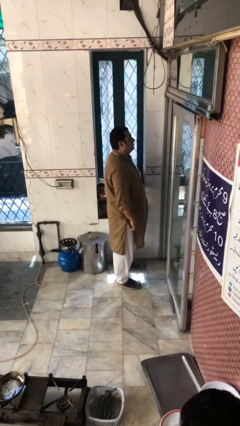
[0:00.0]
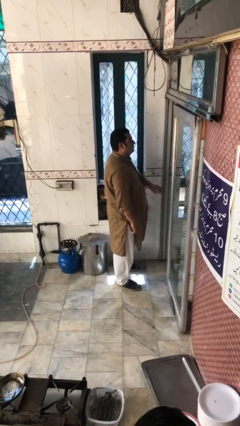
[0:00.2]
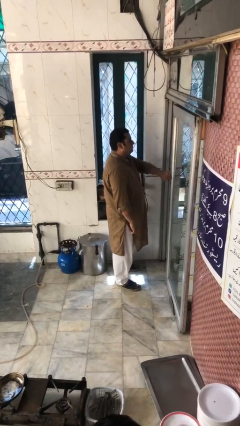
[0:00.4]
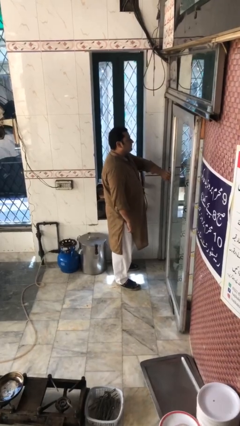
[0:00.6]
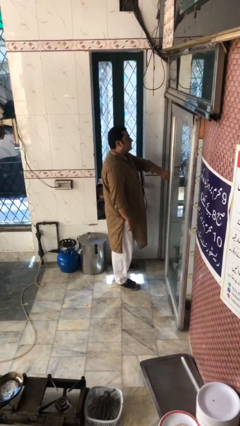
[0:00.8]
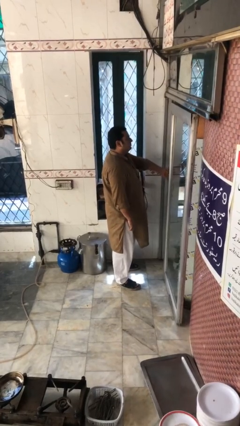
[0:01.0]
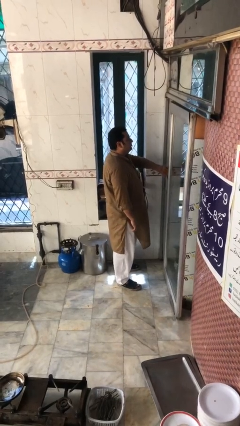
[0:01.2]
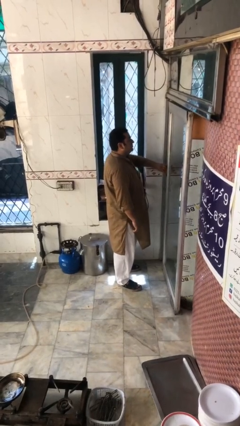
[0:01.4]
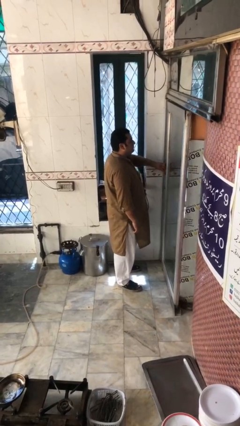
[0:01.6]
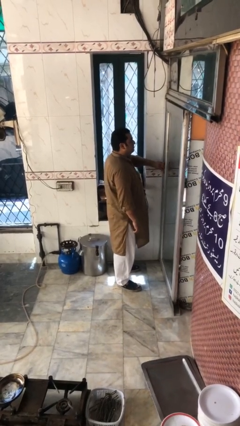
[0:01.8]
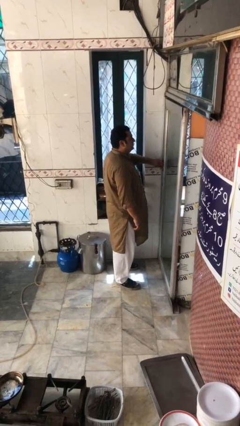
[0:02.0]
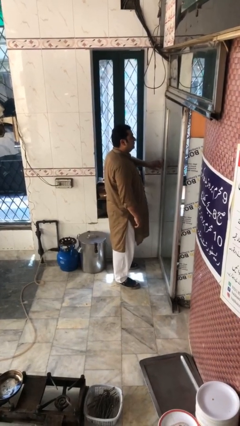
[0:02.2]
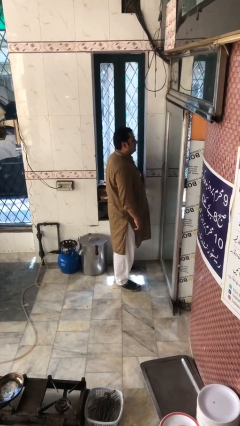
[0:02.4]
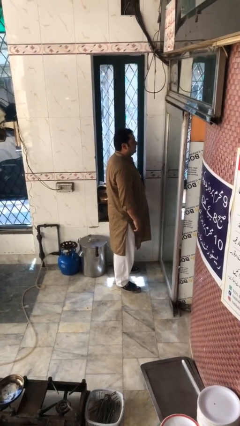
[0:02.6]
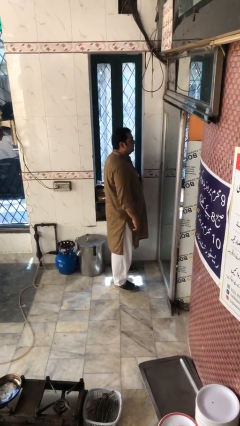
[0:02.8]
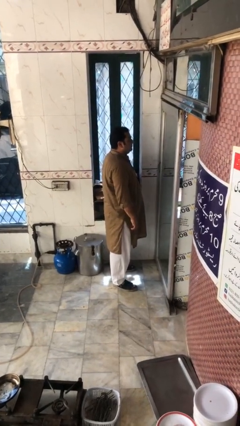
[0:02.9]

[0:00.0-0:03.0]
person closes sliding door

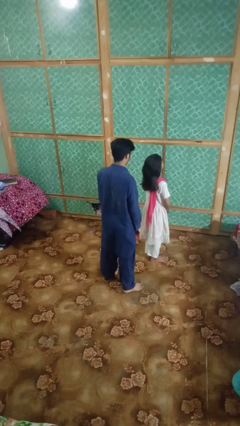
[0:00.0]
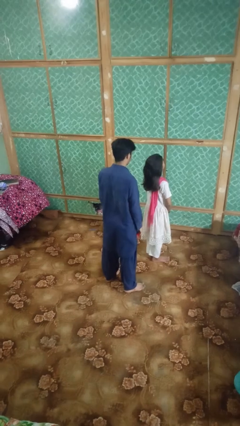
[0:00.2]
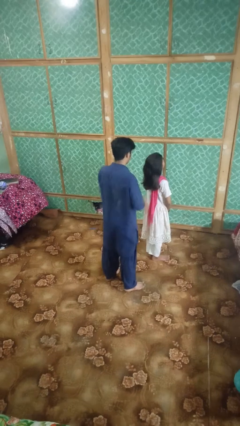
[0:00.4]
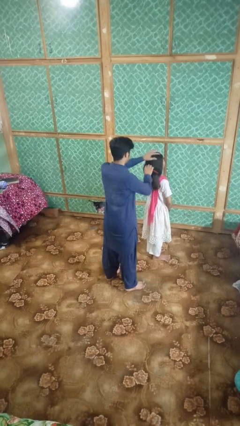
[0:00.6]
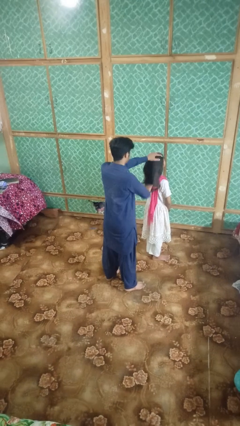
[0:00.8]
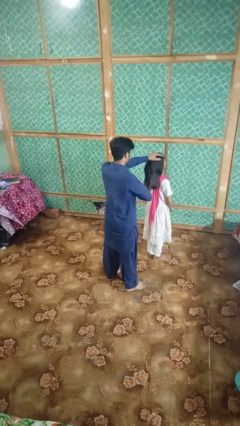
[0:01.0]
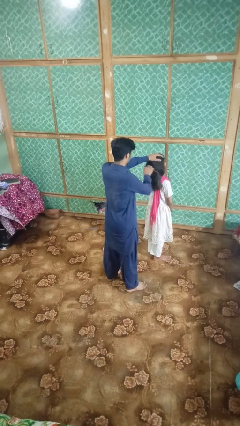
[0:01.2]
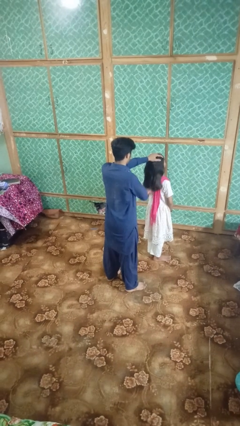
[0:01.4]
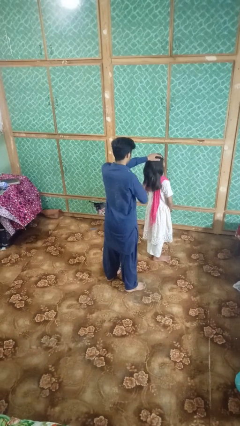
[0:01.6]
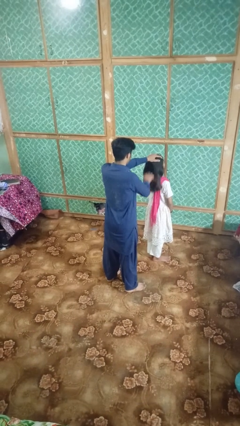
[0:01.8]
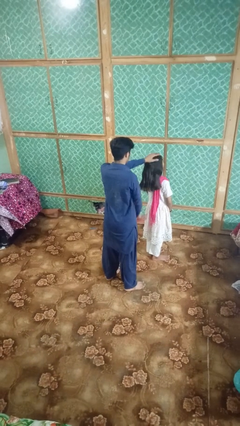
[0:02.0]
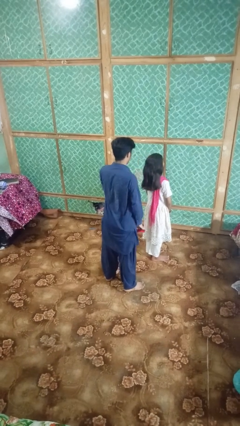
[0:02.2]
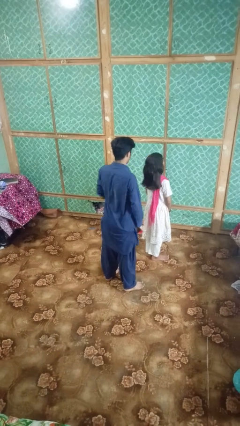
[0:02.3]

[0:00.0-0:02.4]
person brushes hair of person

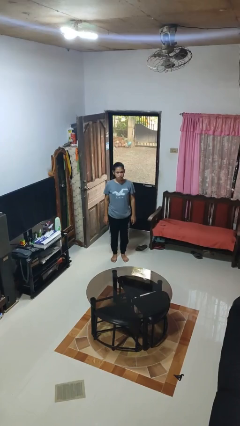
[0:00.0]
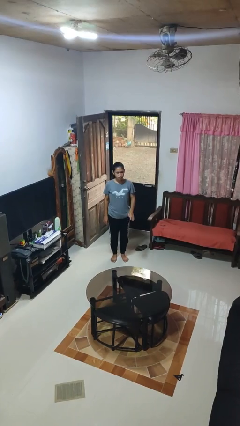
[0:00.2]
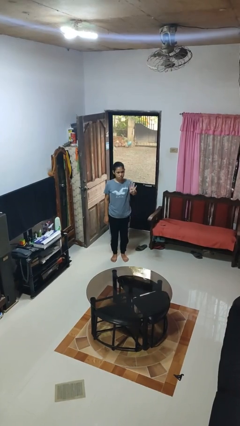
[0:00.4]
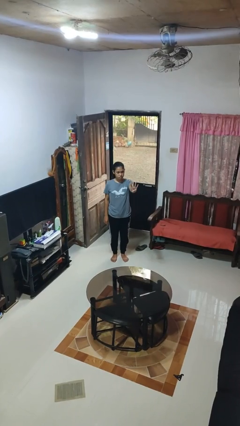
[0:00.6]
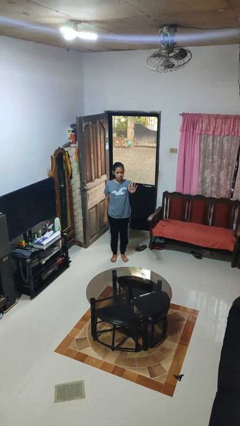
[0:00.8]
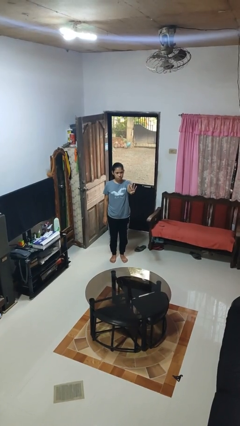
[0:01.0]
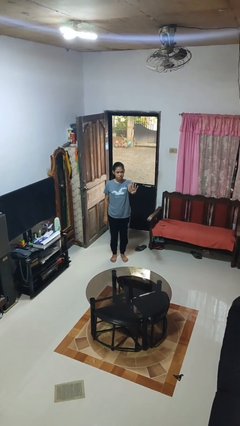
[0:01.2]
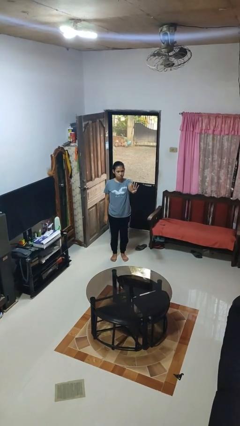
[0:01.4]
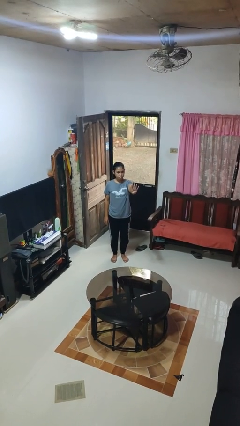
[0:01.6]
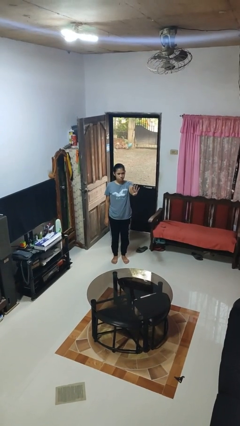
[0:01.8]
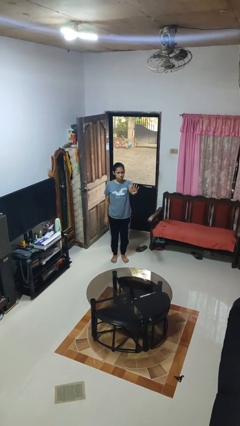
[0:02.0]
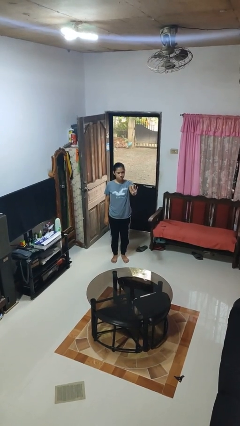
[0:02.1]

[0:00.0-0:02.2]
person gestures number four

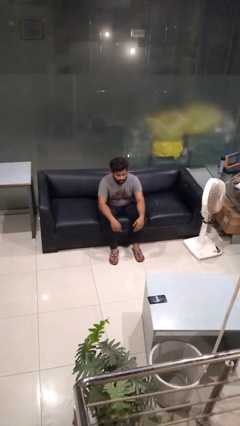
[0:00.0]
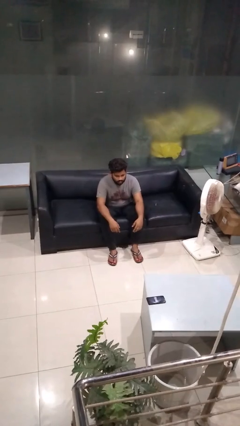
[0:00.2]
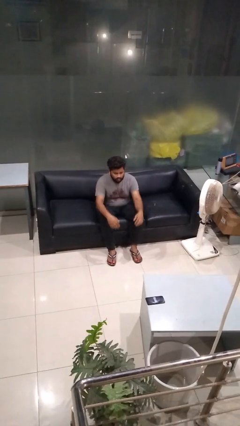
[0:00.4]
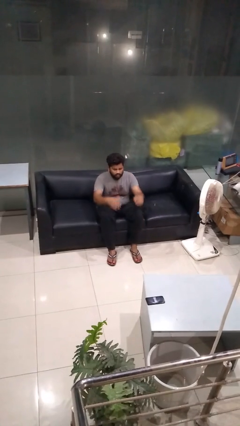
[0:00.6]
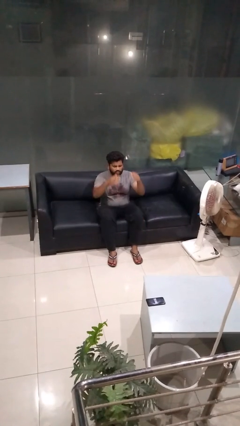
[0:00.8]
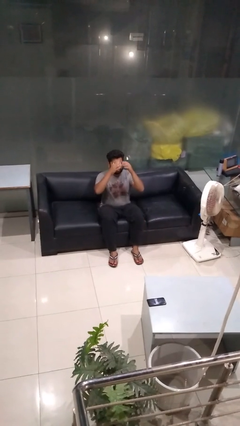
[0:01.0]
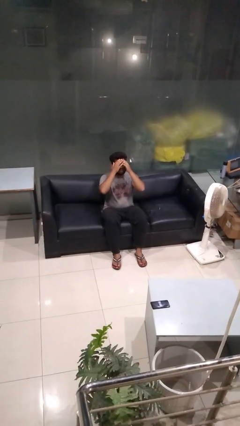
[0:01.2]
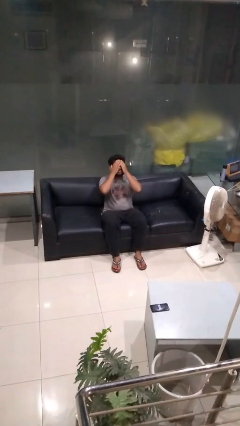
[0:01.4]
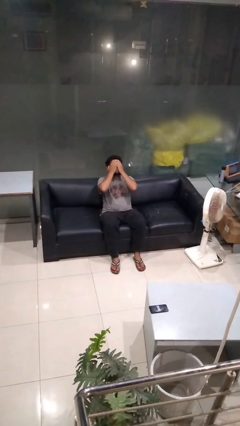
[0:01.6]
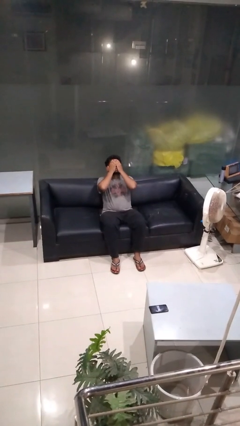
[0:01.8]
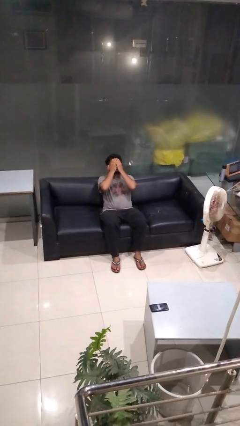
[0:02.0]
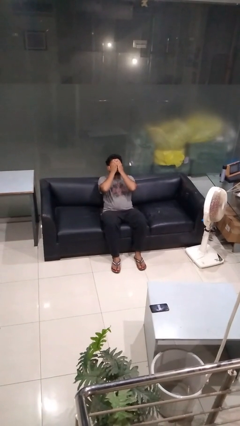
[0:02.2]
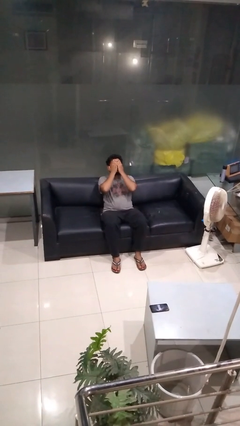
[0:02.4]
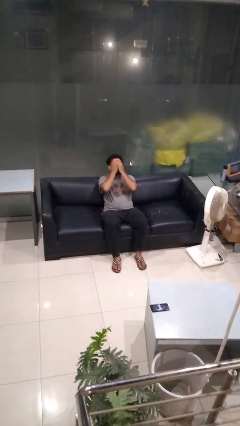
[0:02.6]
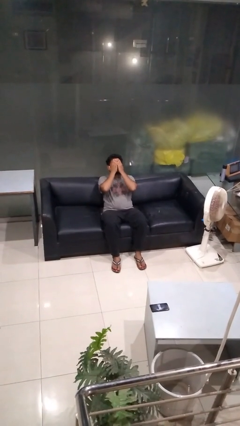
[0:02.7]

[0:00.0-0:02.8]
person covers face with hands

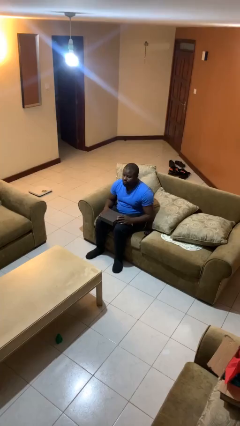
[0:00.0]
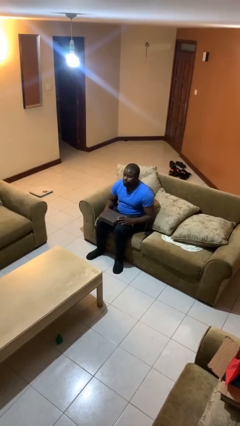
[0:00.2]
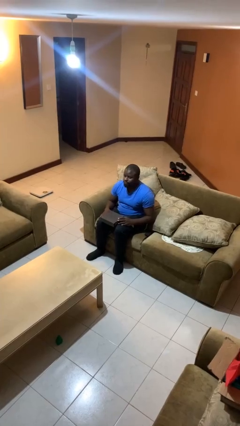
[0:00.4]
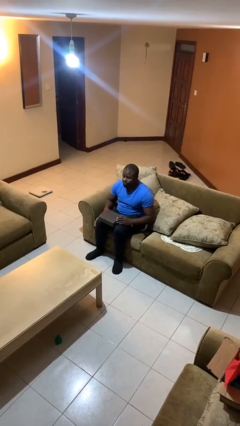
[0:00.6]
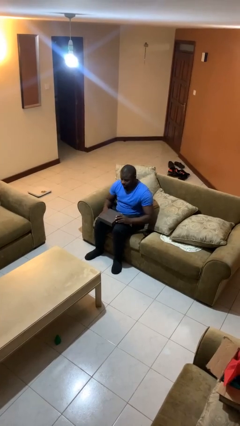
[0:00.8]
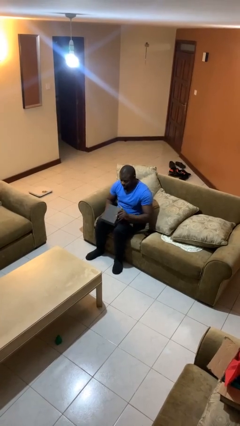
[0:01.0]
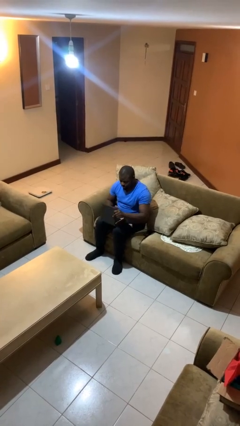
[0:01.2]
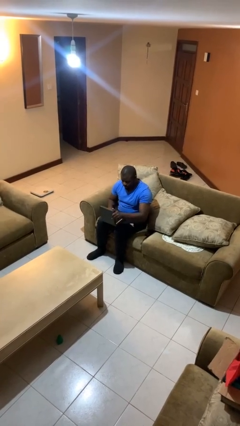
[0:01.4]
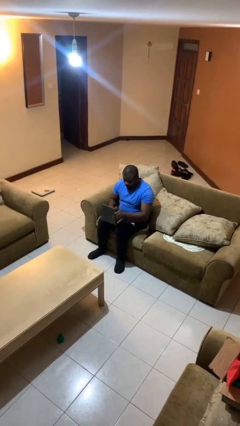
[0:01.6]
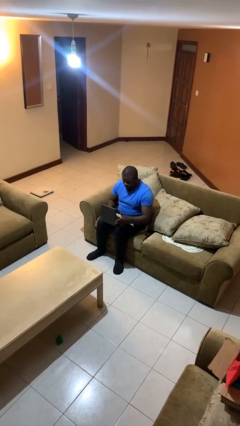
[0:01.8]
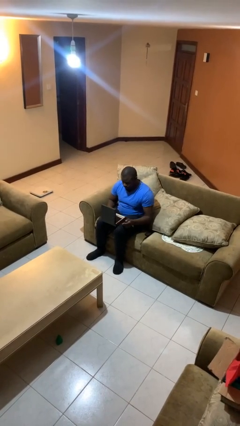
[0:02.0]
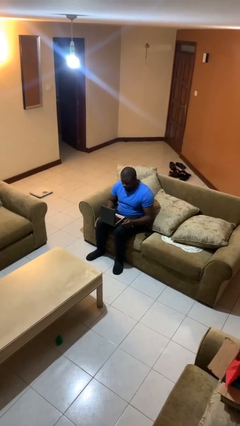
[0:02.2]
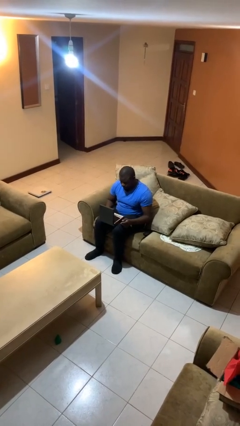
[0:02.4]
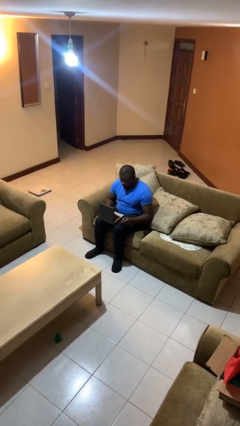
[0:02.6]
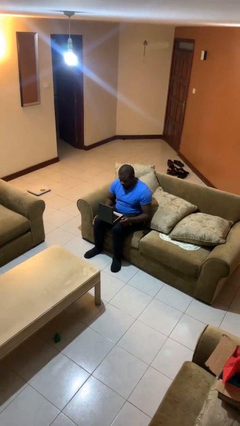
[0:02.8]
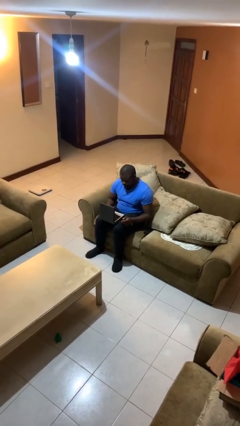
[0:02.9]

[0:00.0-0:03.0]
person opens jewelry box

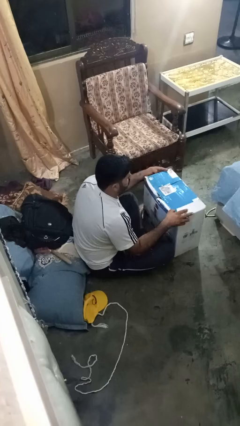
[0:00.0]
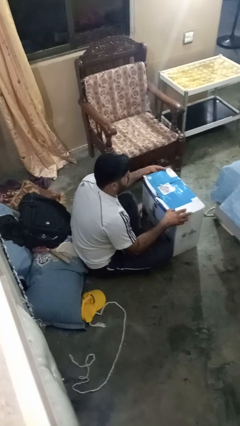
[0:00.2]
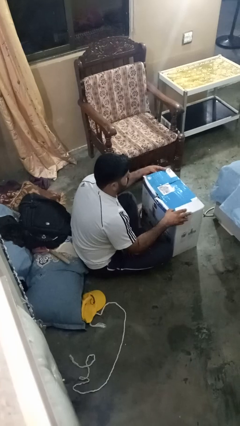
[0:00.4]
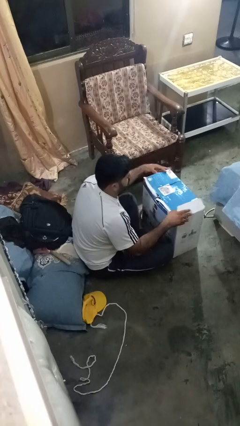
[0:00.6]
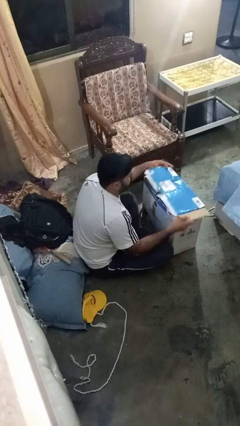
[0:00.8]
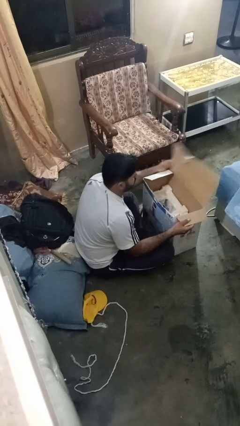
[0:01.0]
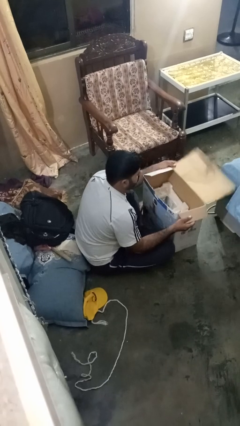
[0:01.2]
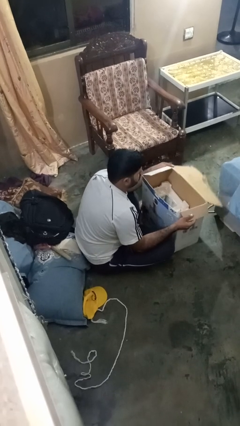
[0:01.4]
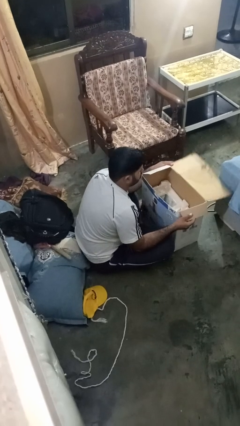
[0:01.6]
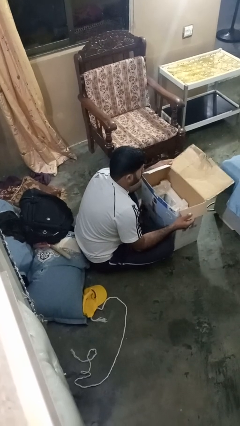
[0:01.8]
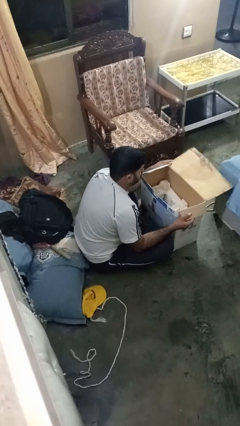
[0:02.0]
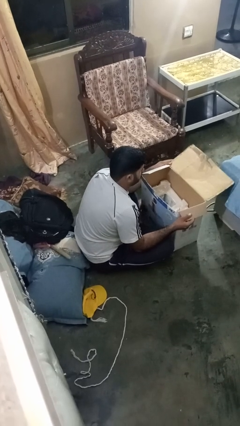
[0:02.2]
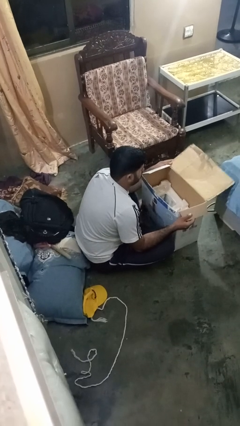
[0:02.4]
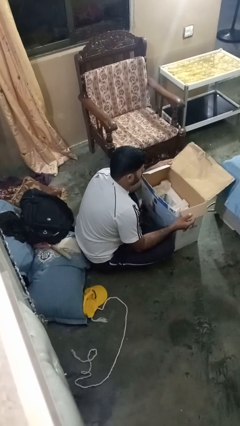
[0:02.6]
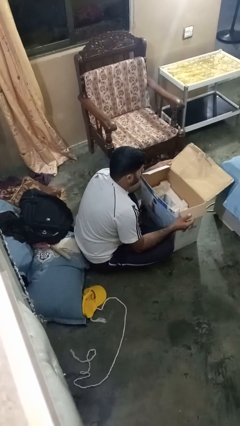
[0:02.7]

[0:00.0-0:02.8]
person opens box

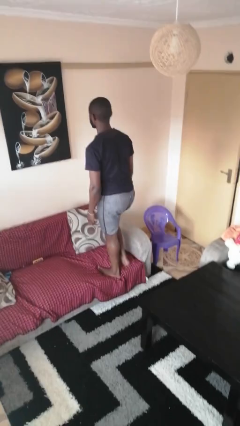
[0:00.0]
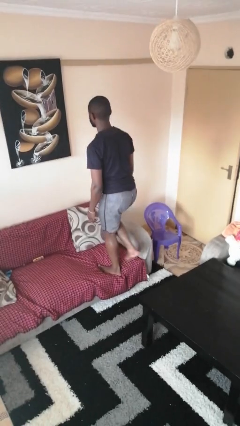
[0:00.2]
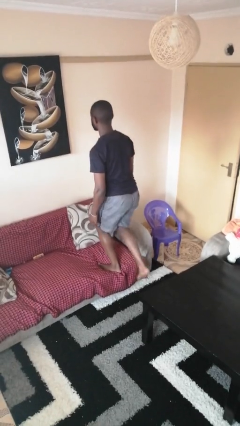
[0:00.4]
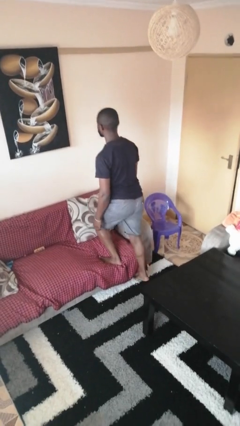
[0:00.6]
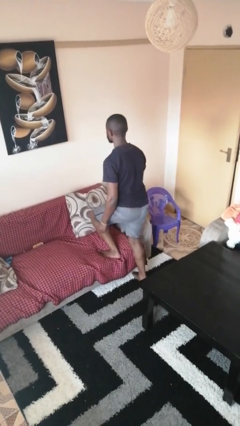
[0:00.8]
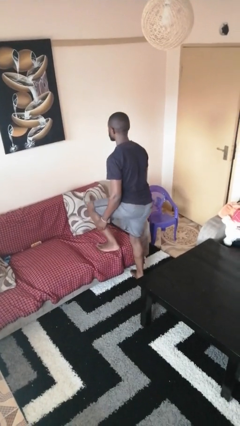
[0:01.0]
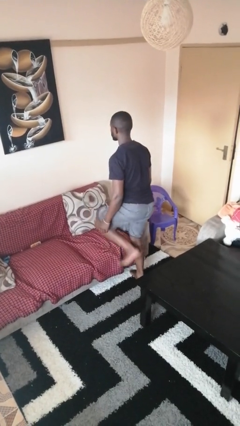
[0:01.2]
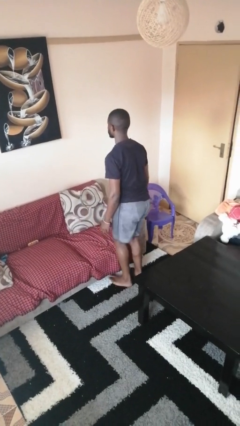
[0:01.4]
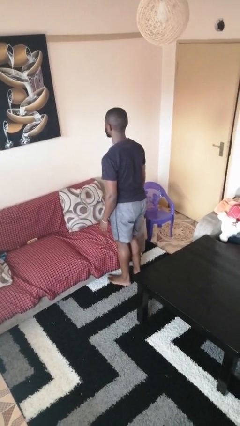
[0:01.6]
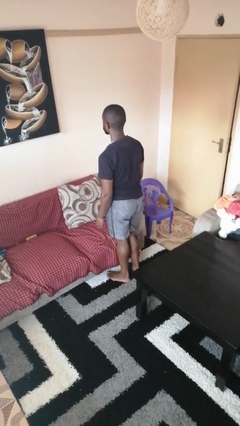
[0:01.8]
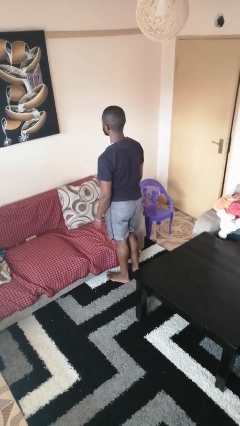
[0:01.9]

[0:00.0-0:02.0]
person climbs off couch
